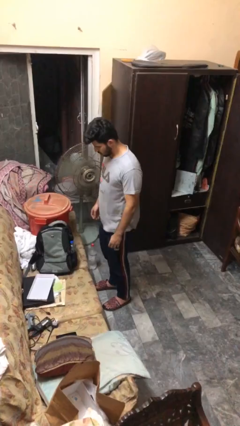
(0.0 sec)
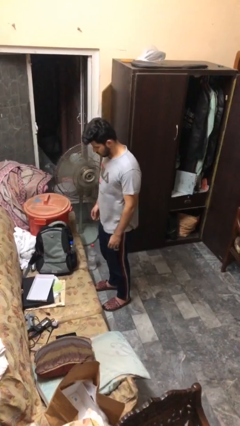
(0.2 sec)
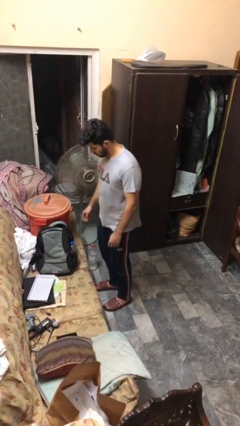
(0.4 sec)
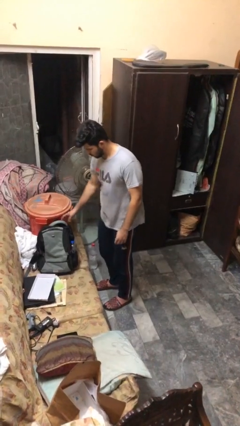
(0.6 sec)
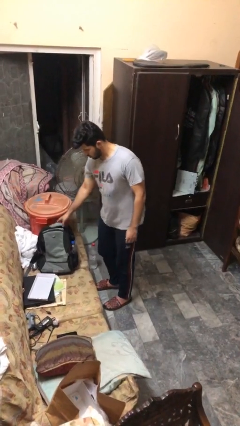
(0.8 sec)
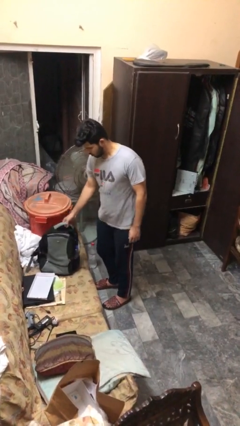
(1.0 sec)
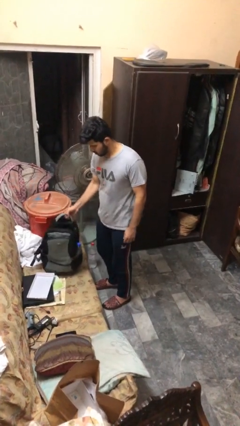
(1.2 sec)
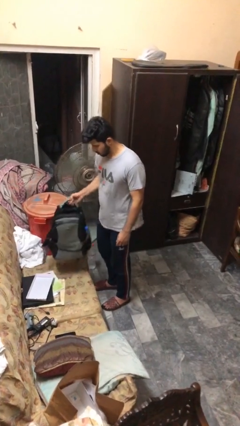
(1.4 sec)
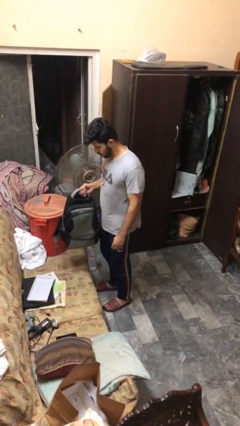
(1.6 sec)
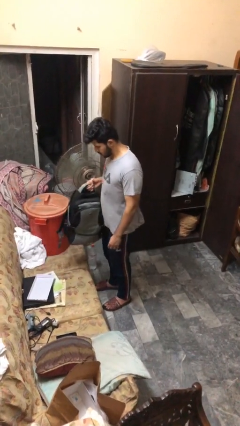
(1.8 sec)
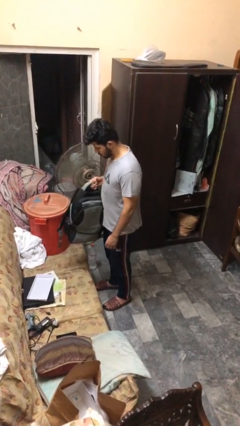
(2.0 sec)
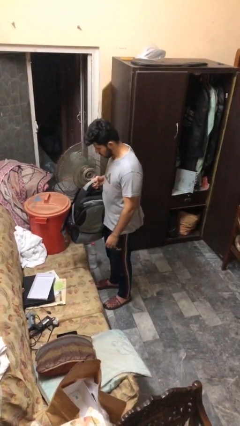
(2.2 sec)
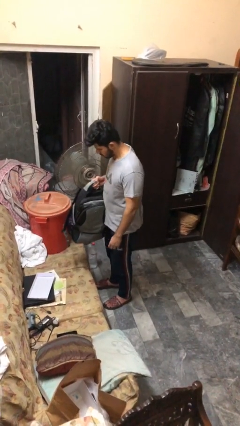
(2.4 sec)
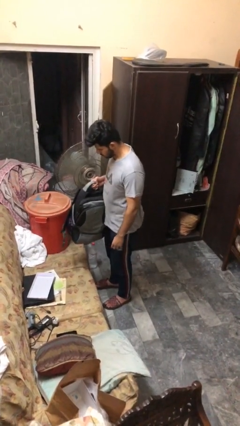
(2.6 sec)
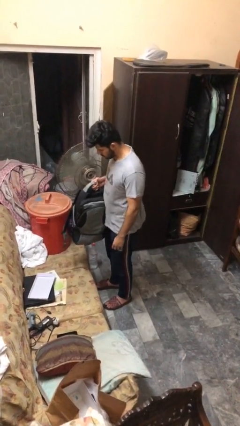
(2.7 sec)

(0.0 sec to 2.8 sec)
person picks up object from couch

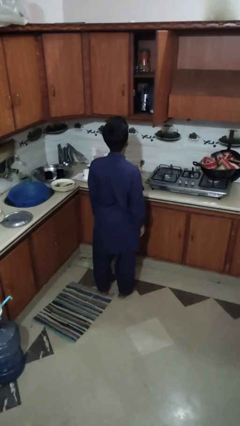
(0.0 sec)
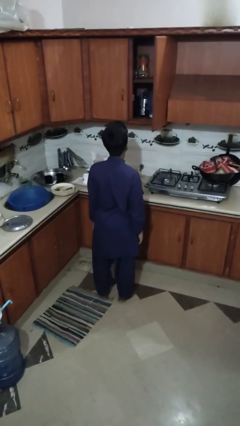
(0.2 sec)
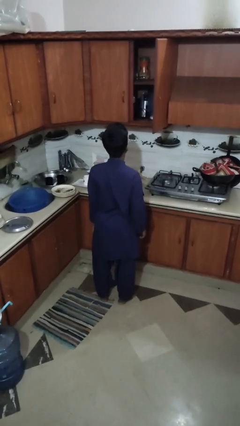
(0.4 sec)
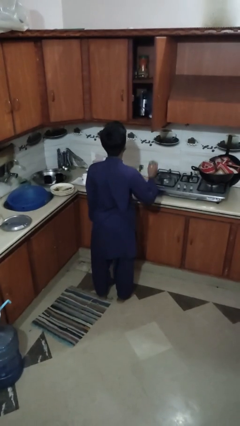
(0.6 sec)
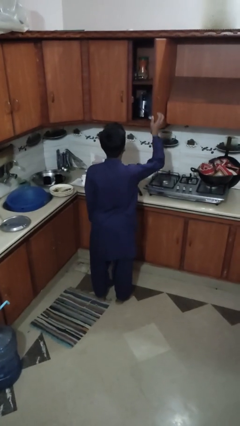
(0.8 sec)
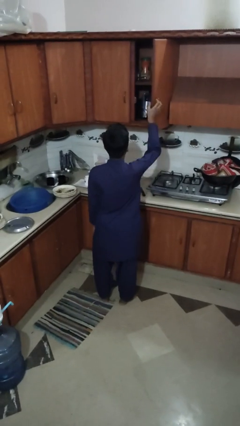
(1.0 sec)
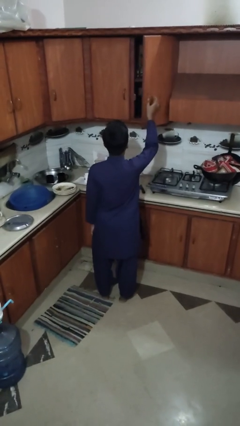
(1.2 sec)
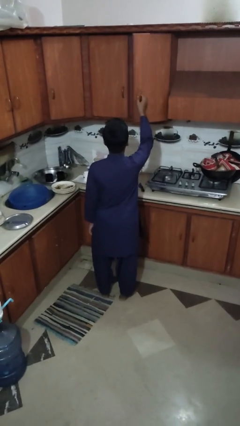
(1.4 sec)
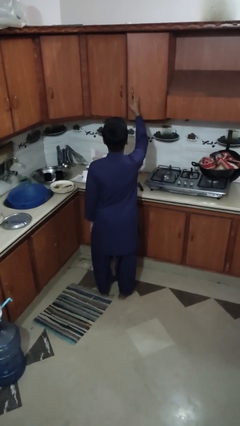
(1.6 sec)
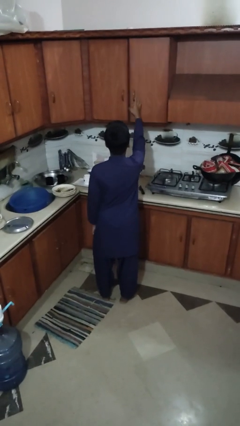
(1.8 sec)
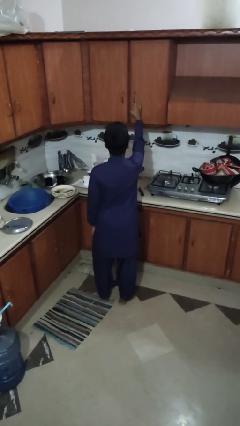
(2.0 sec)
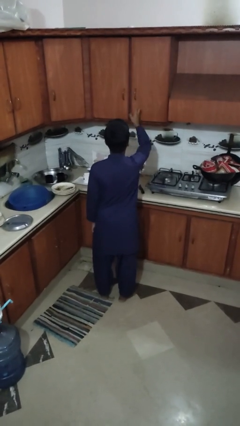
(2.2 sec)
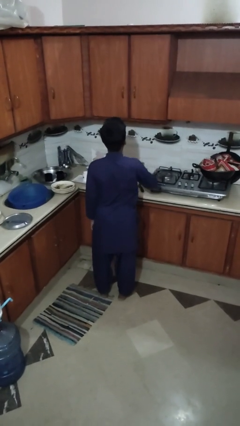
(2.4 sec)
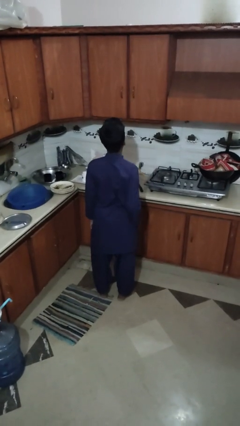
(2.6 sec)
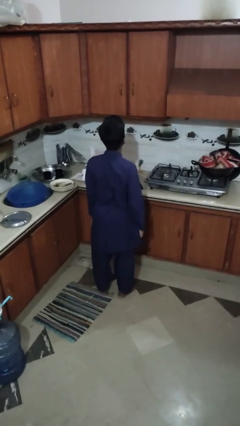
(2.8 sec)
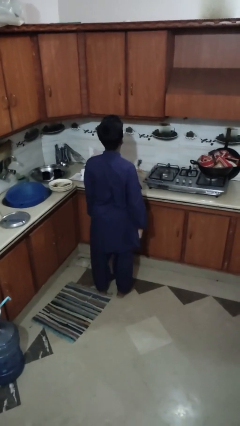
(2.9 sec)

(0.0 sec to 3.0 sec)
person closes cabinet

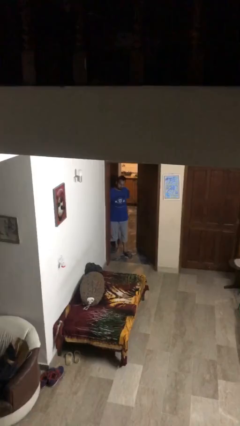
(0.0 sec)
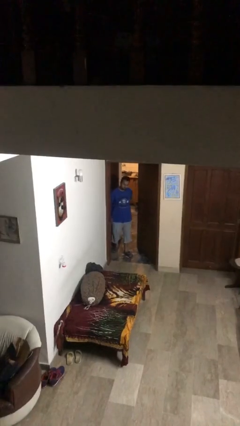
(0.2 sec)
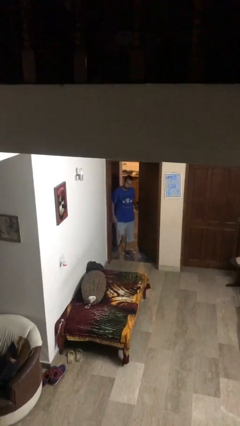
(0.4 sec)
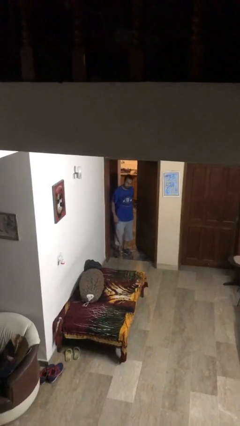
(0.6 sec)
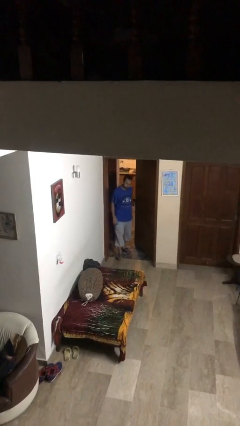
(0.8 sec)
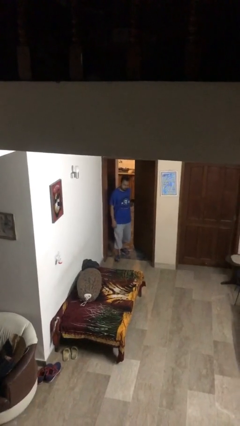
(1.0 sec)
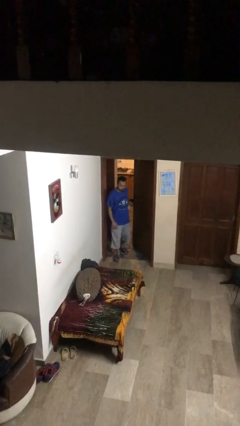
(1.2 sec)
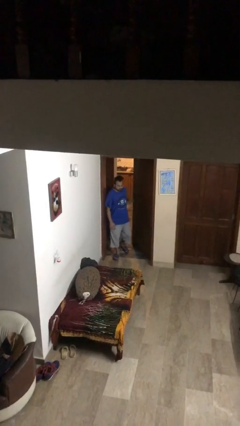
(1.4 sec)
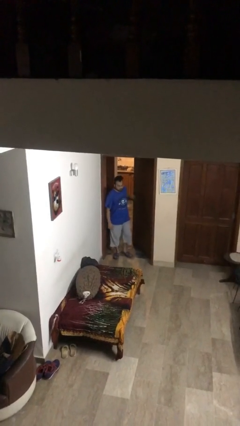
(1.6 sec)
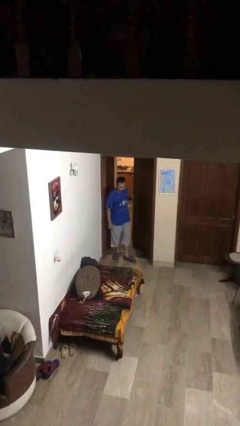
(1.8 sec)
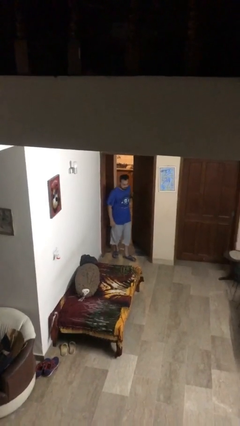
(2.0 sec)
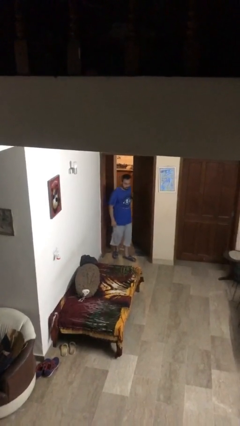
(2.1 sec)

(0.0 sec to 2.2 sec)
person enters scene through structure

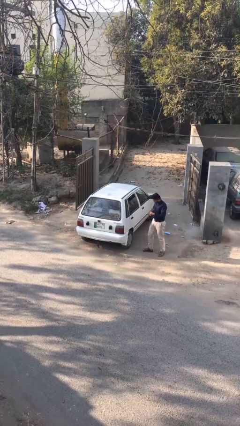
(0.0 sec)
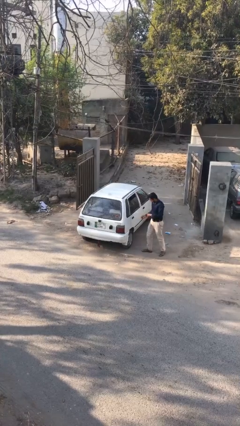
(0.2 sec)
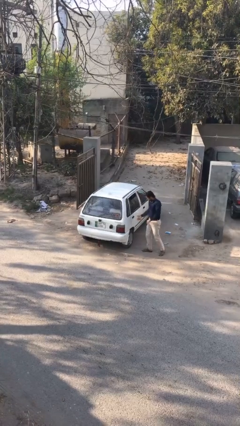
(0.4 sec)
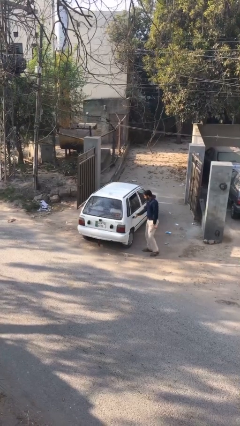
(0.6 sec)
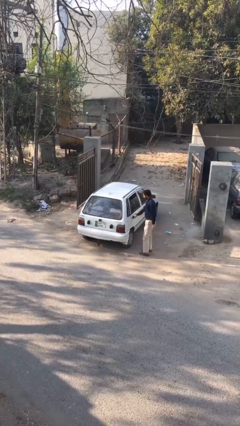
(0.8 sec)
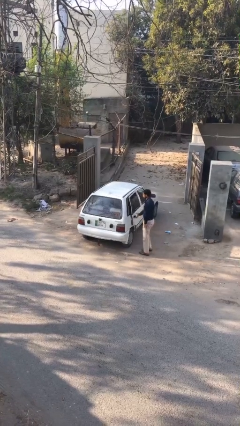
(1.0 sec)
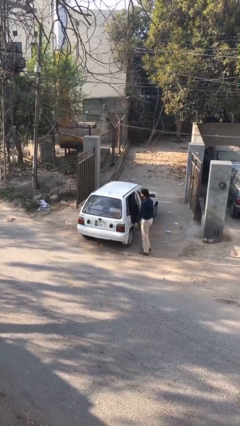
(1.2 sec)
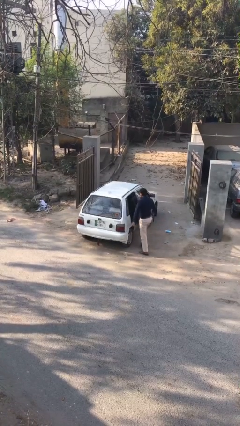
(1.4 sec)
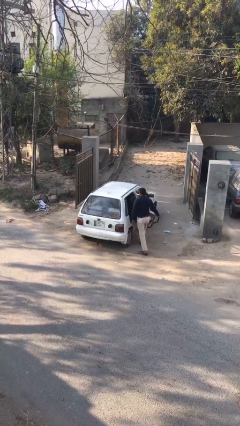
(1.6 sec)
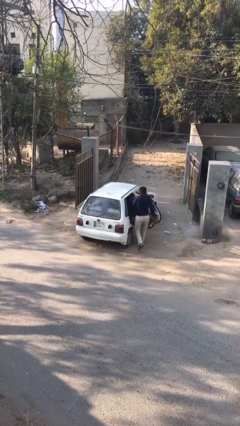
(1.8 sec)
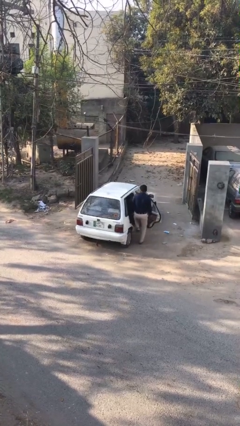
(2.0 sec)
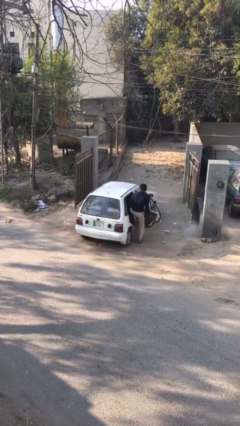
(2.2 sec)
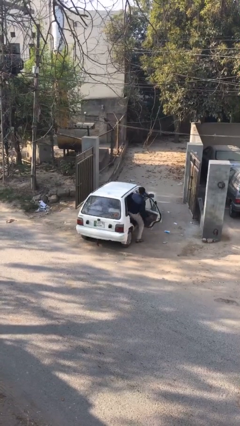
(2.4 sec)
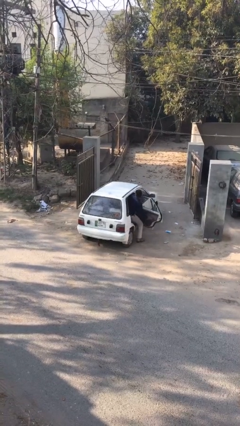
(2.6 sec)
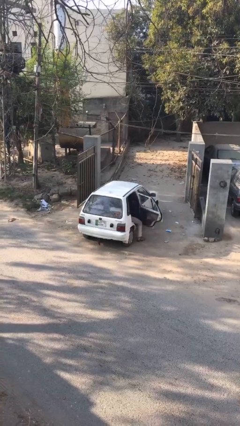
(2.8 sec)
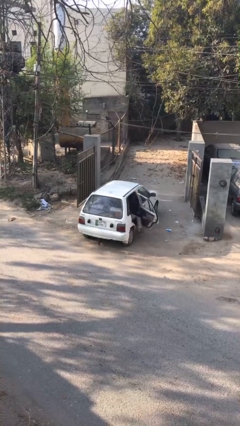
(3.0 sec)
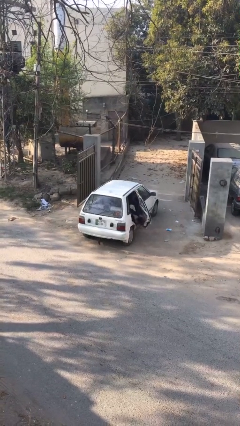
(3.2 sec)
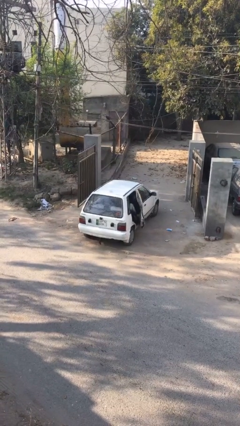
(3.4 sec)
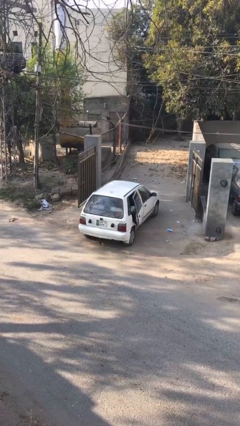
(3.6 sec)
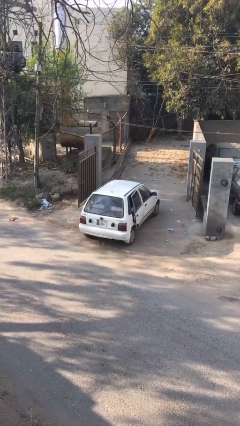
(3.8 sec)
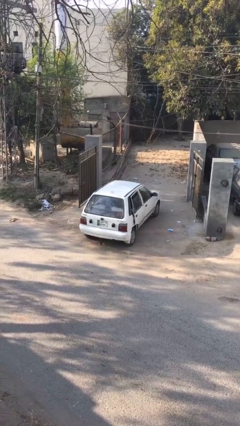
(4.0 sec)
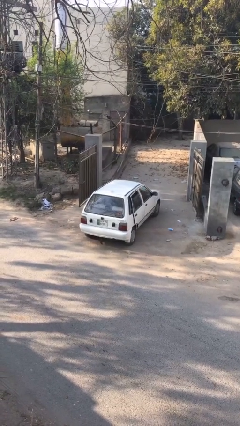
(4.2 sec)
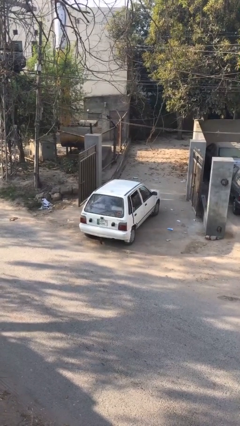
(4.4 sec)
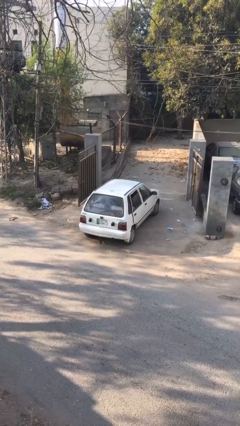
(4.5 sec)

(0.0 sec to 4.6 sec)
car picks up person

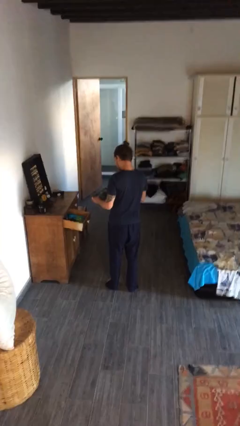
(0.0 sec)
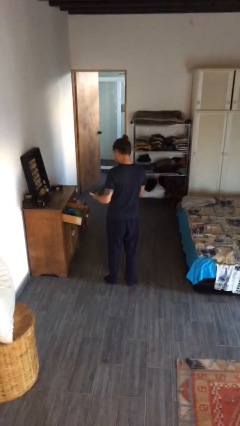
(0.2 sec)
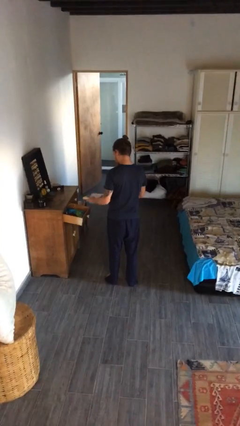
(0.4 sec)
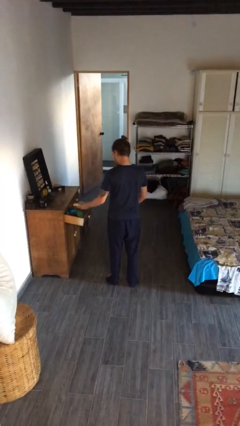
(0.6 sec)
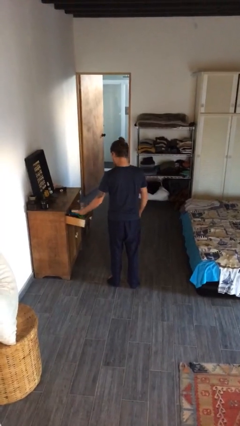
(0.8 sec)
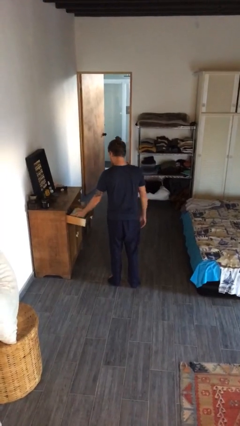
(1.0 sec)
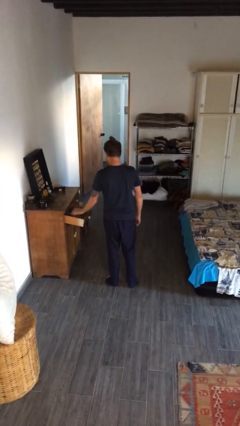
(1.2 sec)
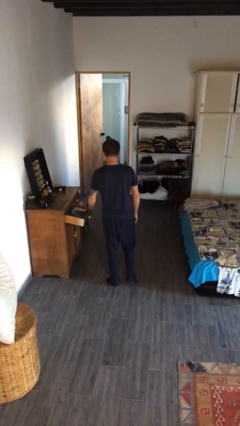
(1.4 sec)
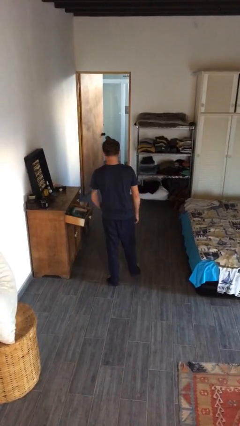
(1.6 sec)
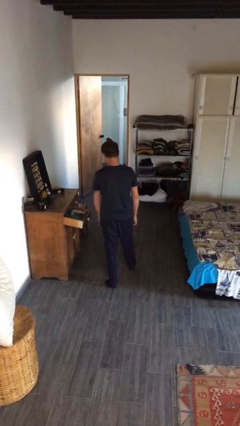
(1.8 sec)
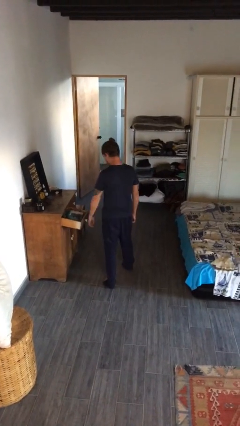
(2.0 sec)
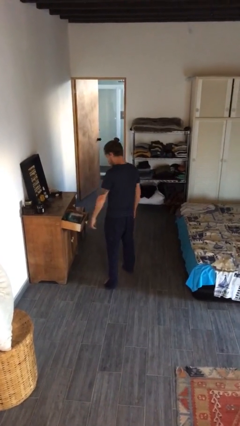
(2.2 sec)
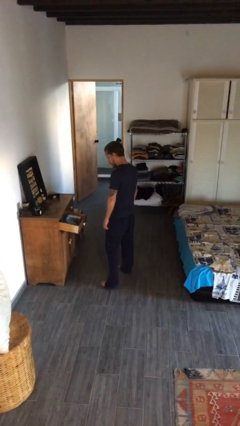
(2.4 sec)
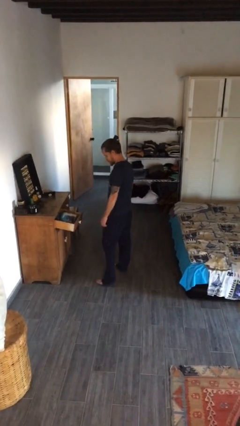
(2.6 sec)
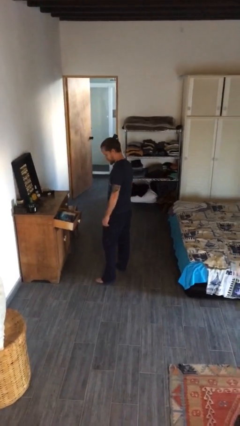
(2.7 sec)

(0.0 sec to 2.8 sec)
person puts down object into cabinet

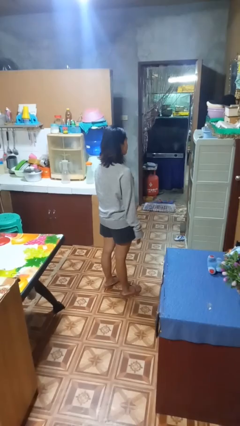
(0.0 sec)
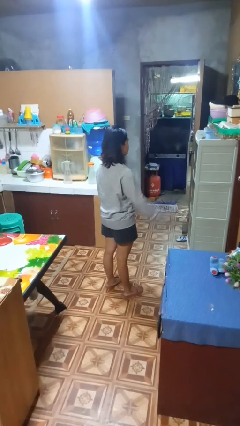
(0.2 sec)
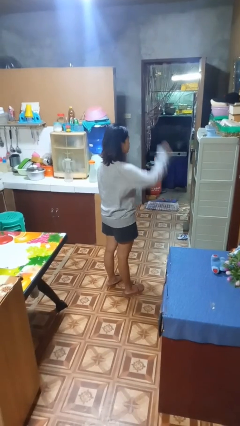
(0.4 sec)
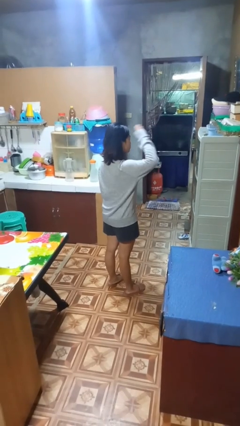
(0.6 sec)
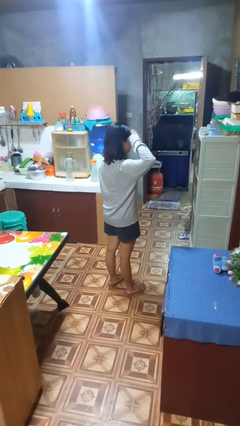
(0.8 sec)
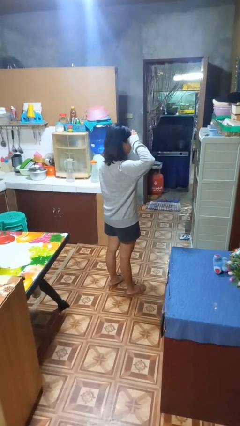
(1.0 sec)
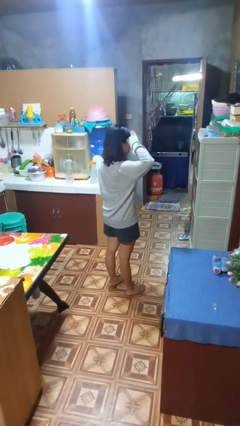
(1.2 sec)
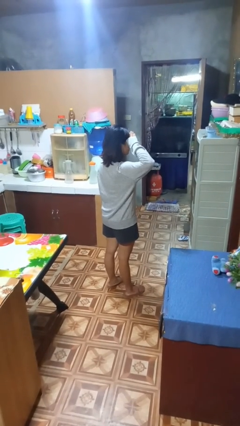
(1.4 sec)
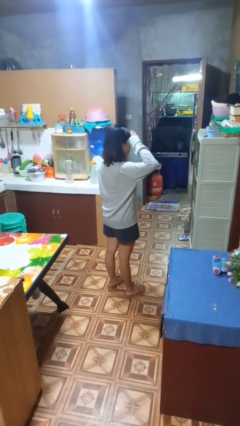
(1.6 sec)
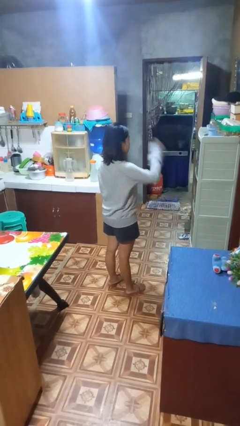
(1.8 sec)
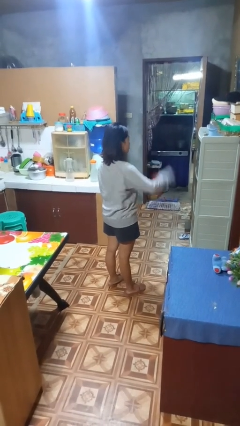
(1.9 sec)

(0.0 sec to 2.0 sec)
person salutes
